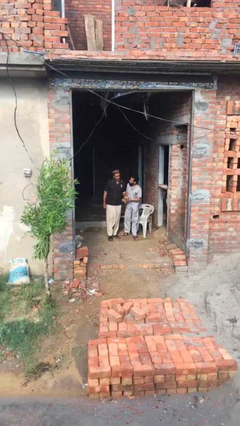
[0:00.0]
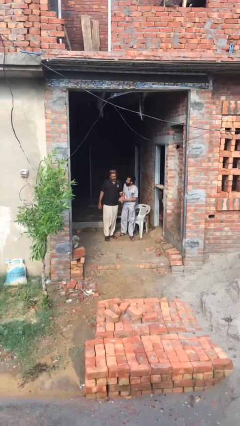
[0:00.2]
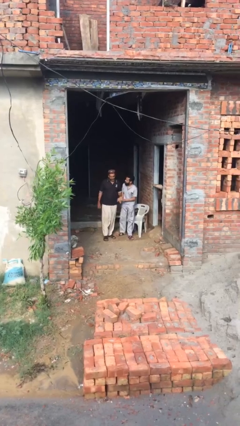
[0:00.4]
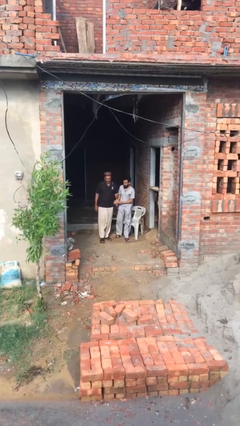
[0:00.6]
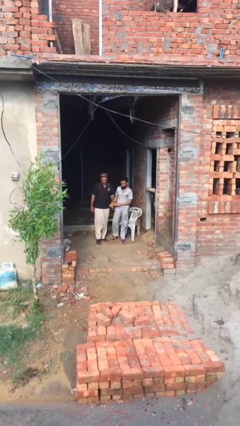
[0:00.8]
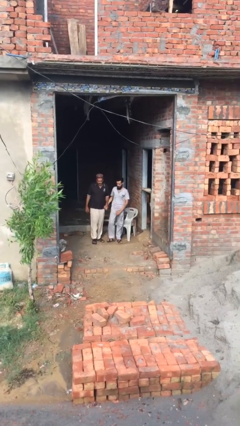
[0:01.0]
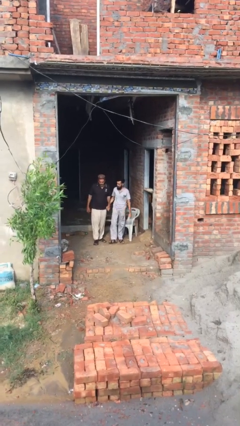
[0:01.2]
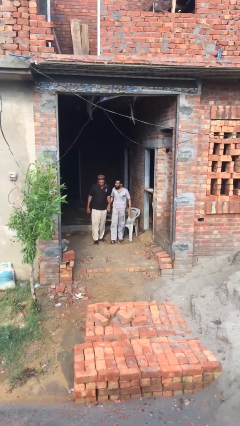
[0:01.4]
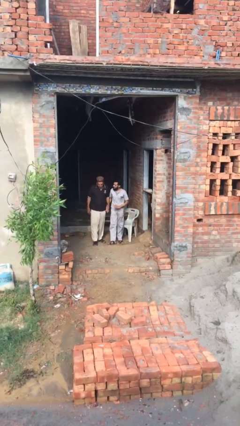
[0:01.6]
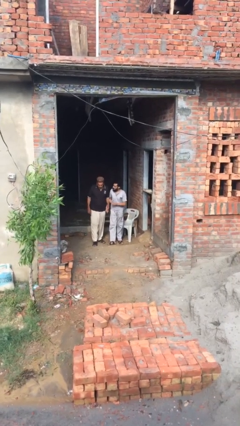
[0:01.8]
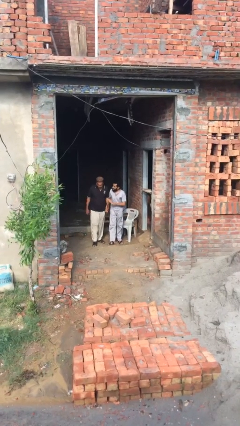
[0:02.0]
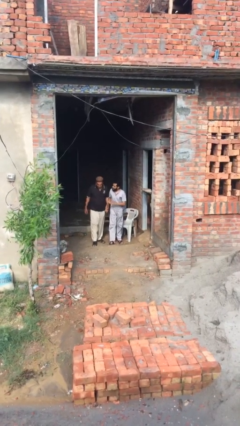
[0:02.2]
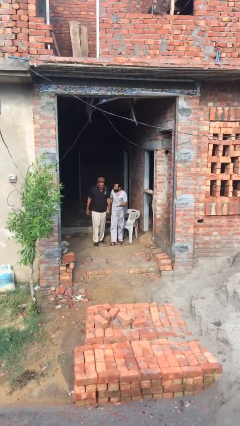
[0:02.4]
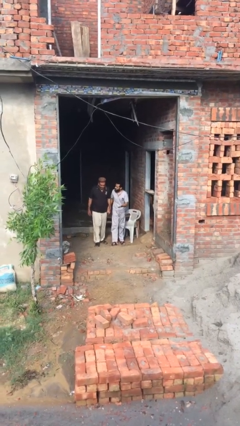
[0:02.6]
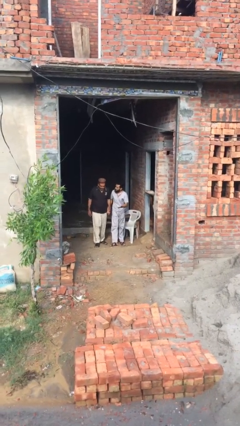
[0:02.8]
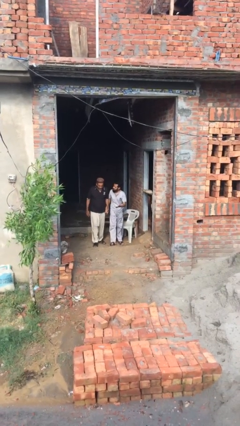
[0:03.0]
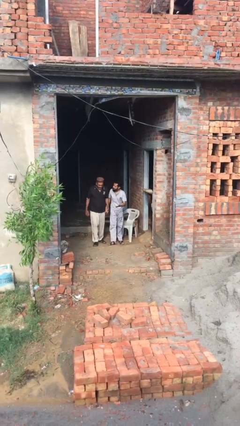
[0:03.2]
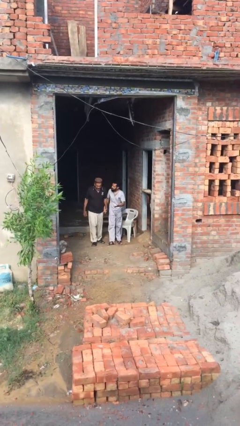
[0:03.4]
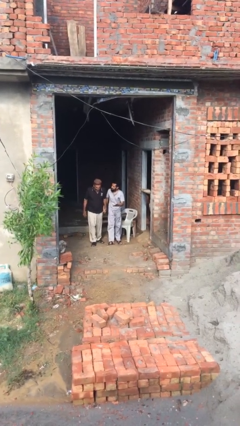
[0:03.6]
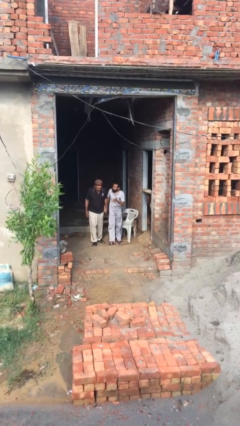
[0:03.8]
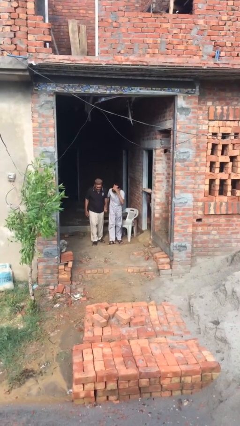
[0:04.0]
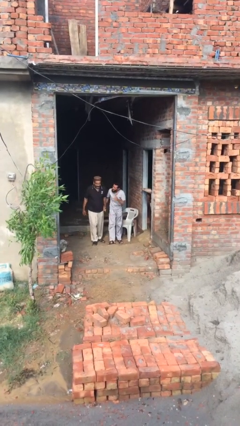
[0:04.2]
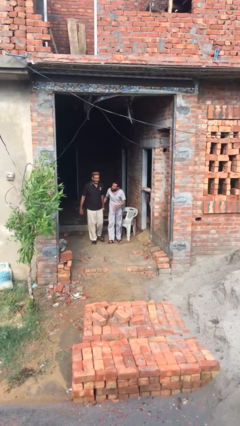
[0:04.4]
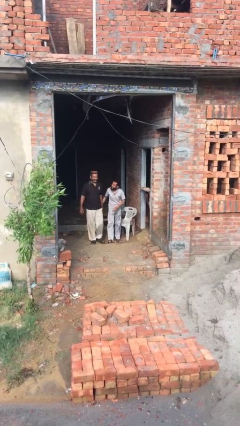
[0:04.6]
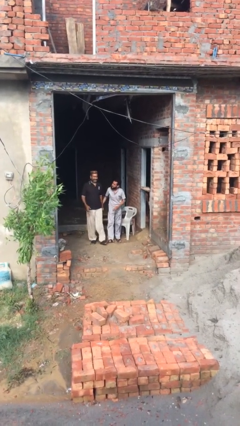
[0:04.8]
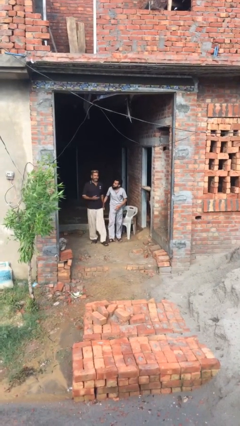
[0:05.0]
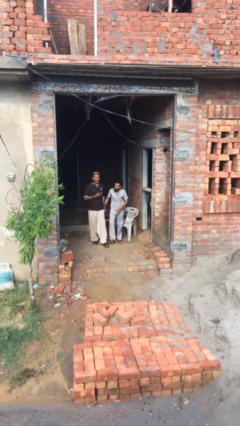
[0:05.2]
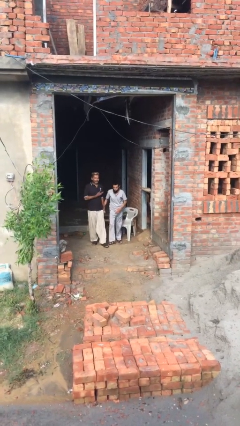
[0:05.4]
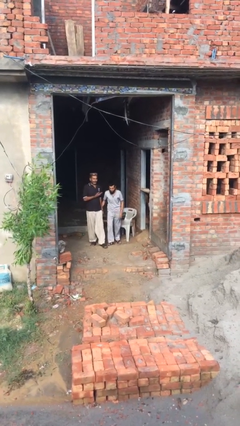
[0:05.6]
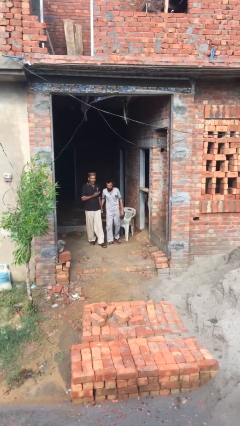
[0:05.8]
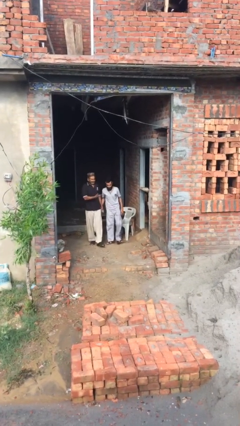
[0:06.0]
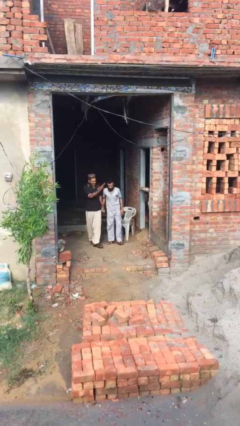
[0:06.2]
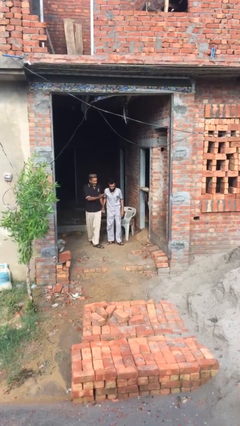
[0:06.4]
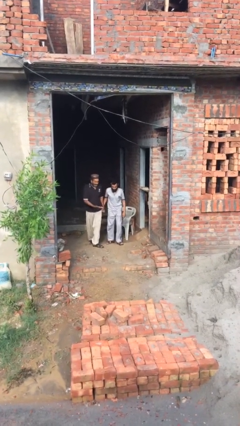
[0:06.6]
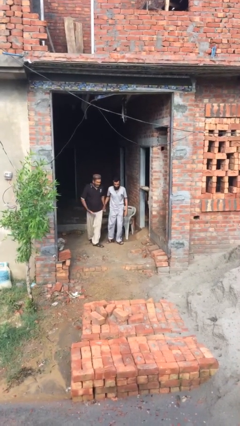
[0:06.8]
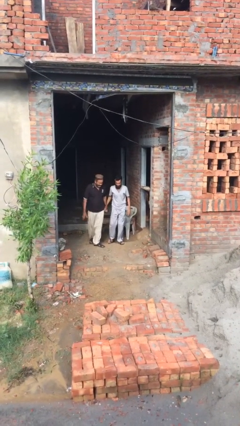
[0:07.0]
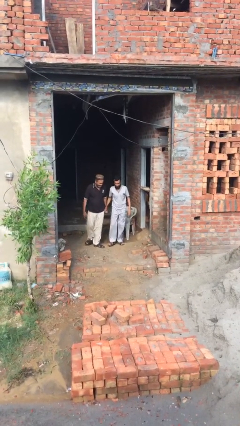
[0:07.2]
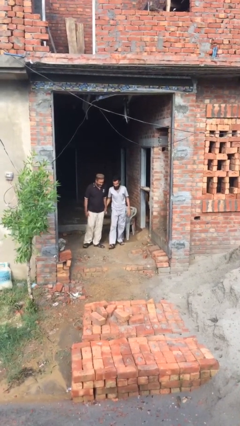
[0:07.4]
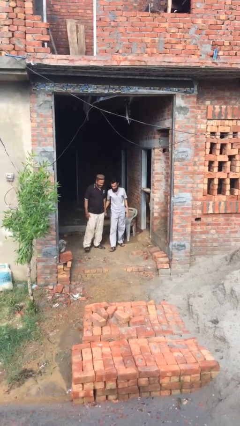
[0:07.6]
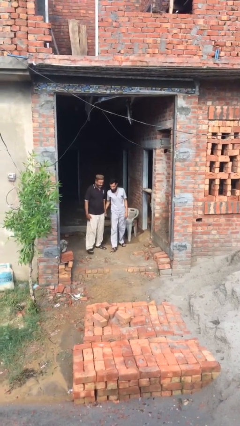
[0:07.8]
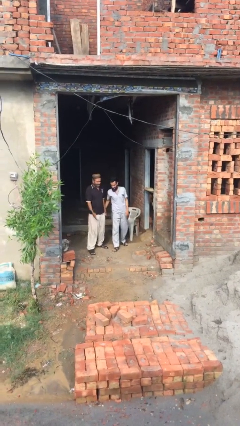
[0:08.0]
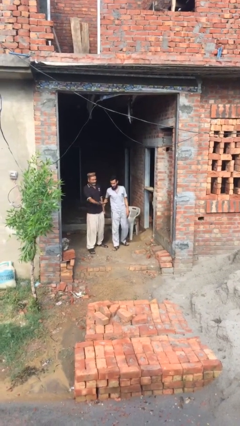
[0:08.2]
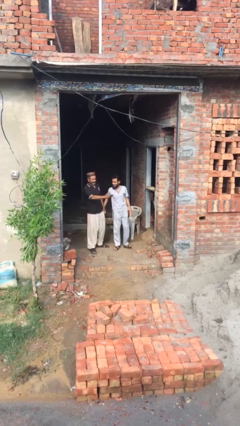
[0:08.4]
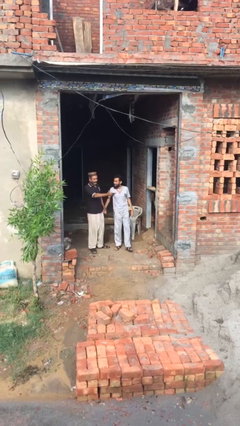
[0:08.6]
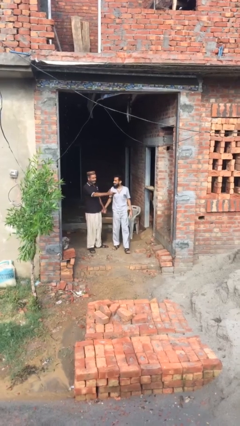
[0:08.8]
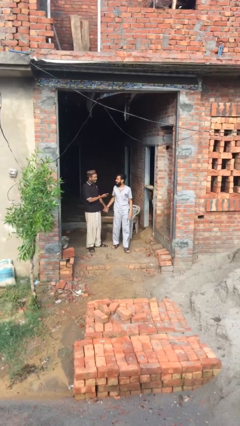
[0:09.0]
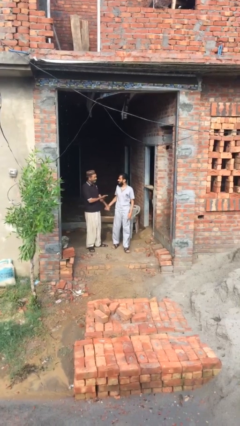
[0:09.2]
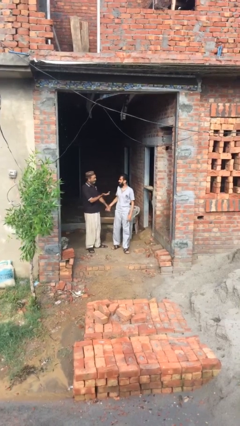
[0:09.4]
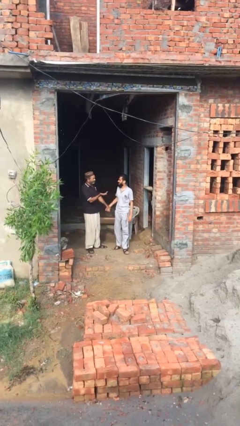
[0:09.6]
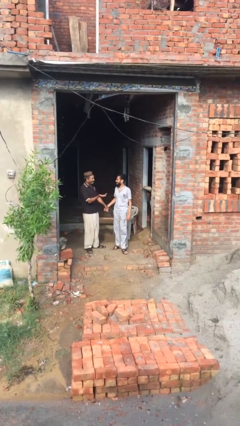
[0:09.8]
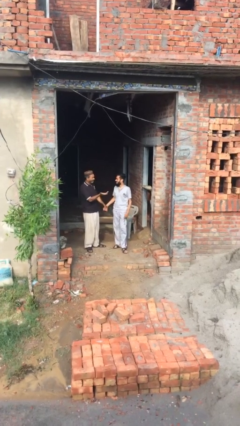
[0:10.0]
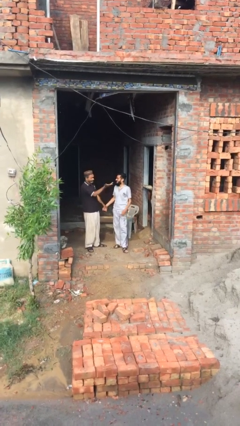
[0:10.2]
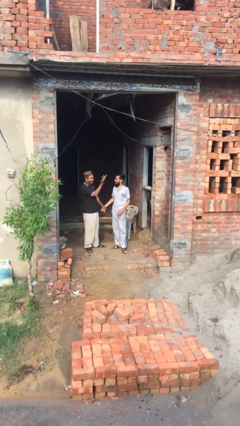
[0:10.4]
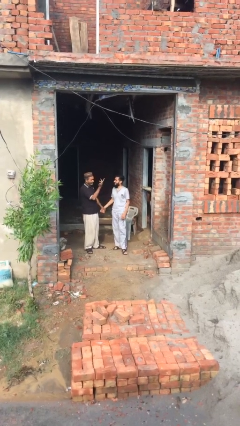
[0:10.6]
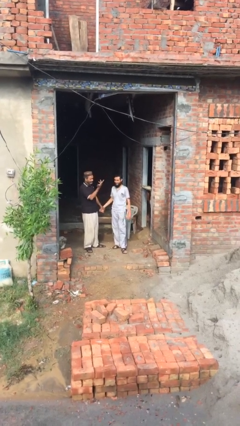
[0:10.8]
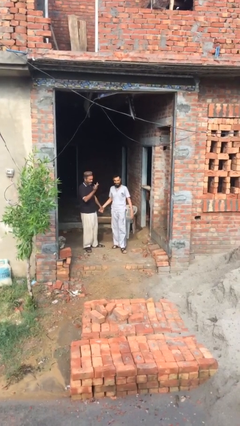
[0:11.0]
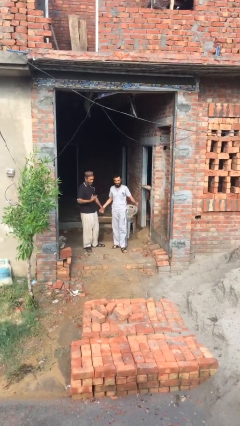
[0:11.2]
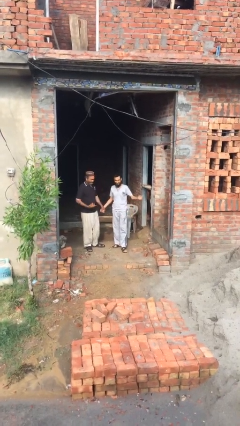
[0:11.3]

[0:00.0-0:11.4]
person holds hand

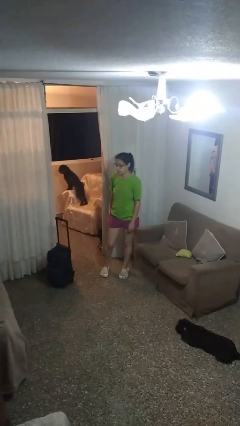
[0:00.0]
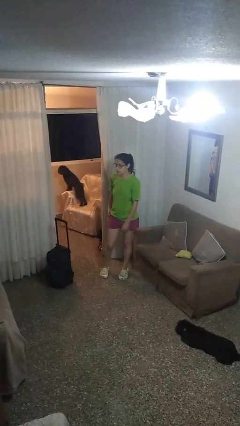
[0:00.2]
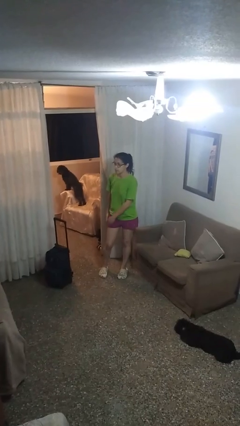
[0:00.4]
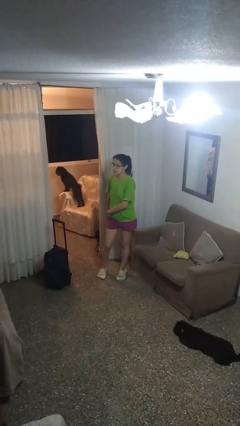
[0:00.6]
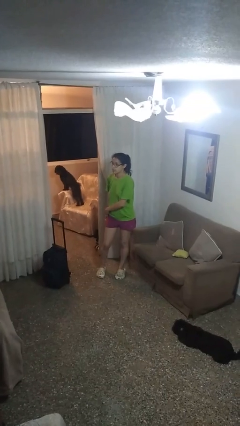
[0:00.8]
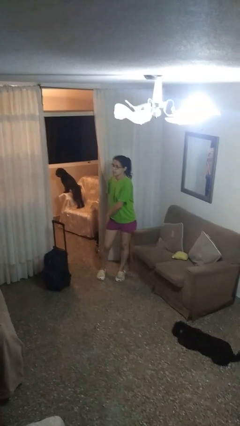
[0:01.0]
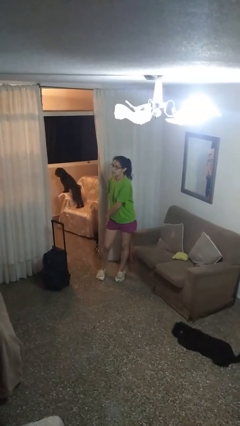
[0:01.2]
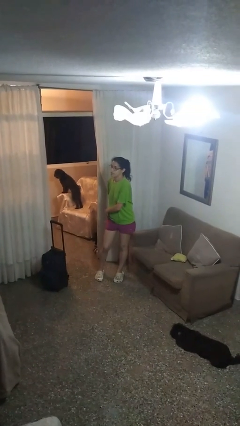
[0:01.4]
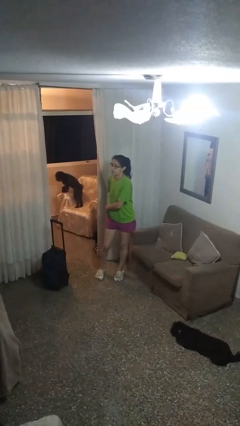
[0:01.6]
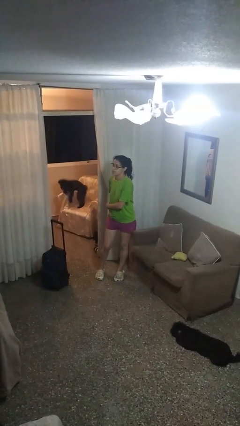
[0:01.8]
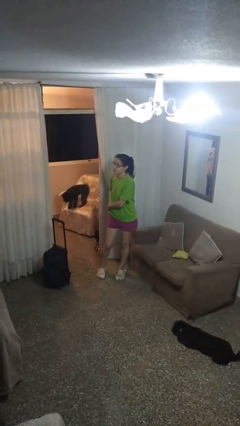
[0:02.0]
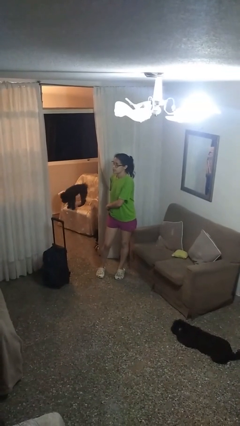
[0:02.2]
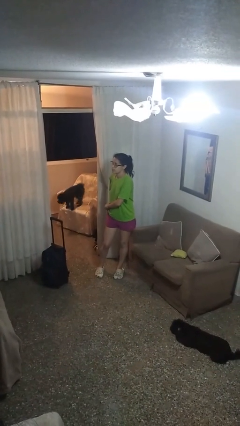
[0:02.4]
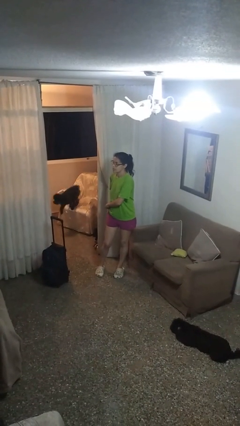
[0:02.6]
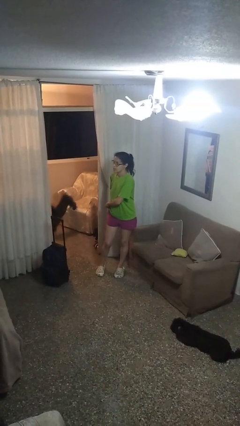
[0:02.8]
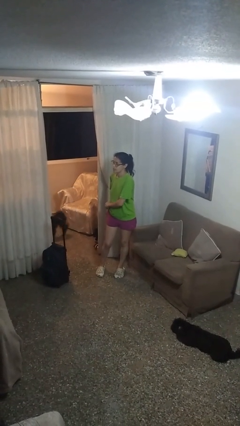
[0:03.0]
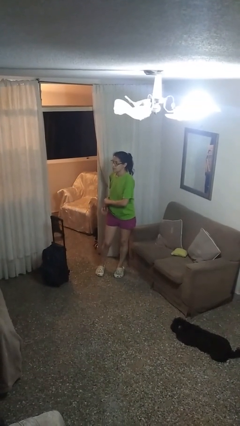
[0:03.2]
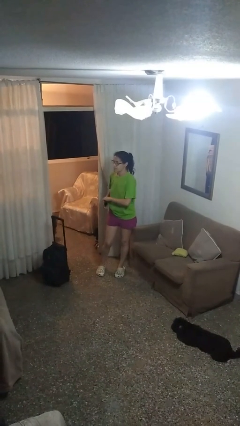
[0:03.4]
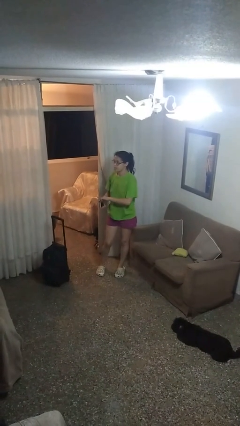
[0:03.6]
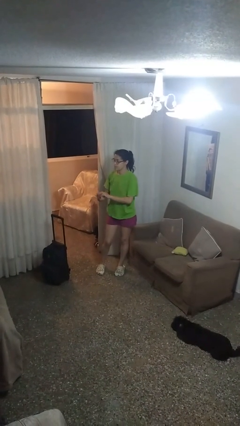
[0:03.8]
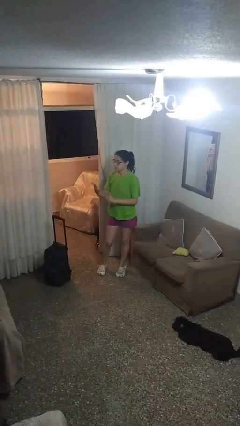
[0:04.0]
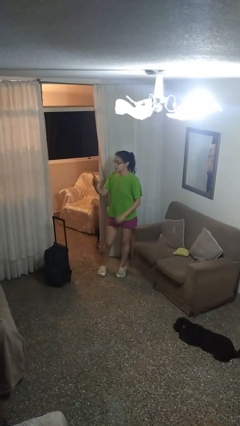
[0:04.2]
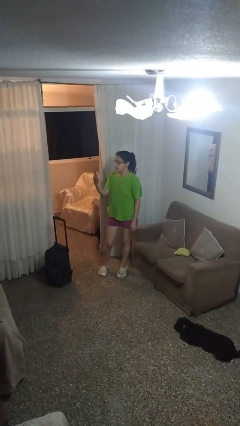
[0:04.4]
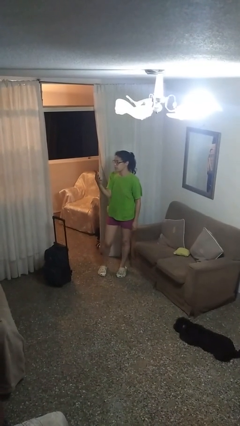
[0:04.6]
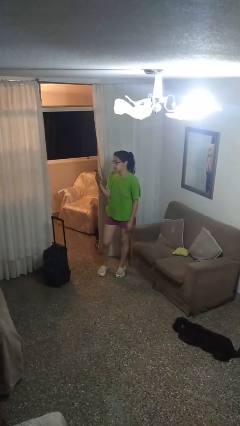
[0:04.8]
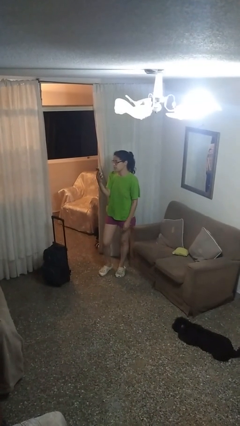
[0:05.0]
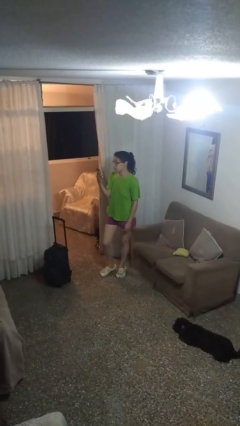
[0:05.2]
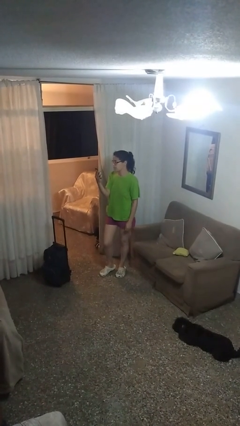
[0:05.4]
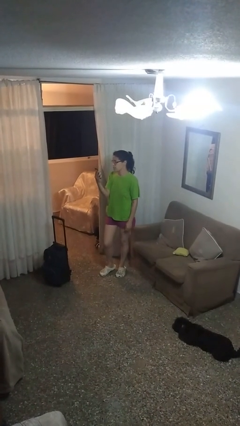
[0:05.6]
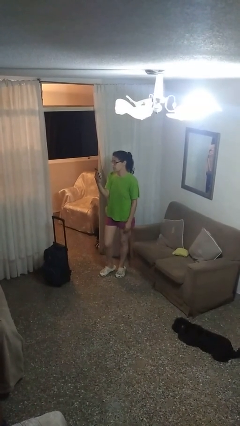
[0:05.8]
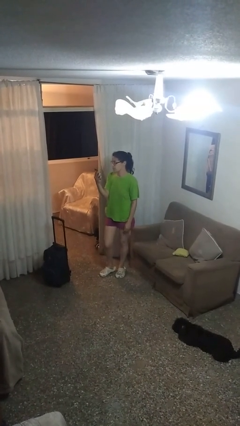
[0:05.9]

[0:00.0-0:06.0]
person takes phone from pocket

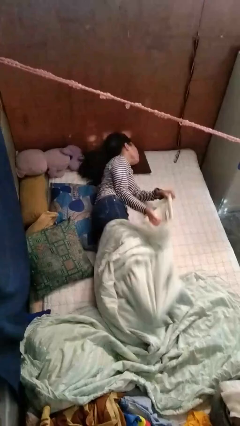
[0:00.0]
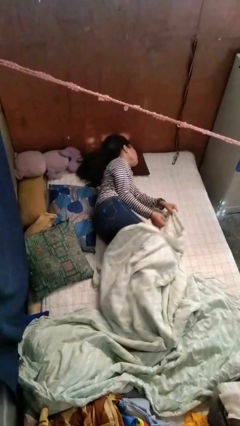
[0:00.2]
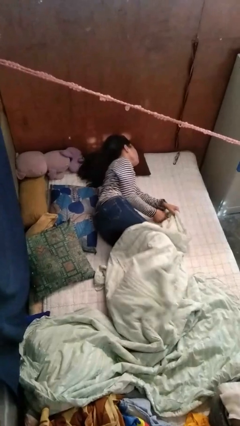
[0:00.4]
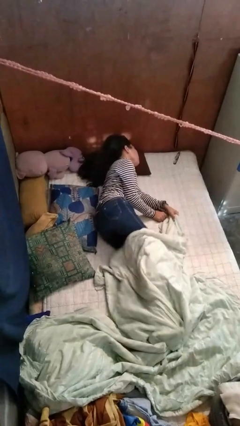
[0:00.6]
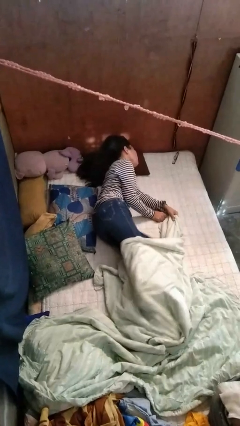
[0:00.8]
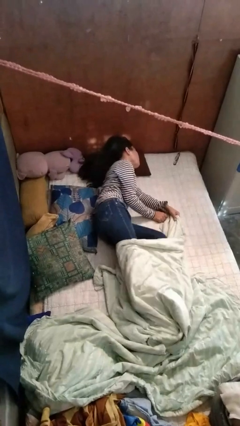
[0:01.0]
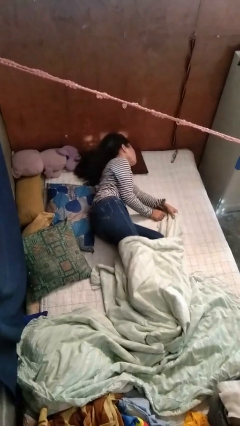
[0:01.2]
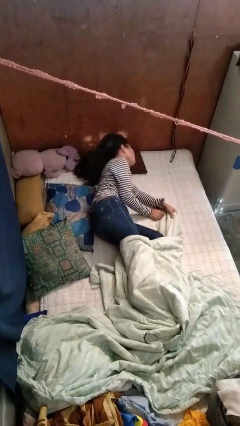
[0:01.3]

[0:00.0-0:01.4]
person uncovers with bedsheets
